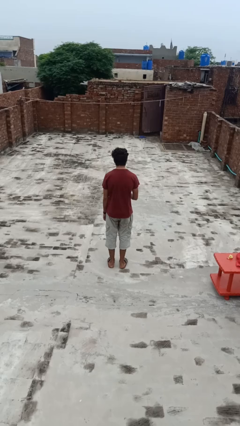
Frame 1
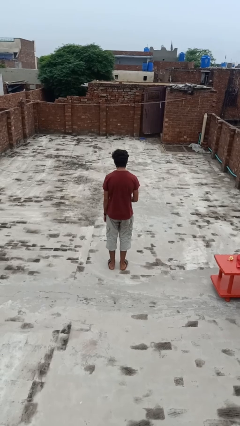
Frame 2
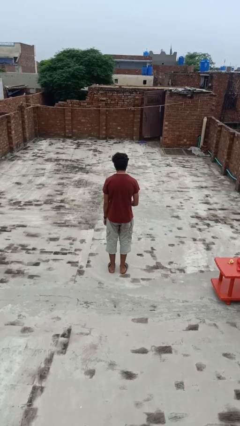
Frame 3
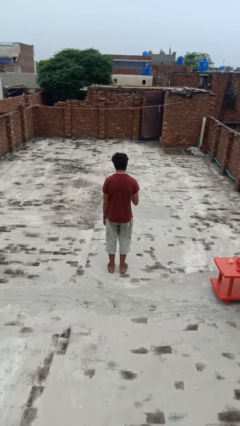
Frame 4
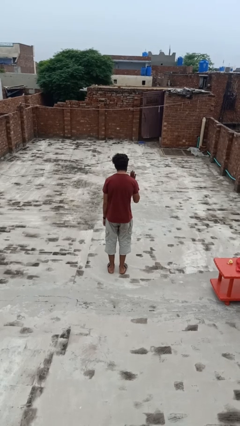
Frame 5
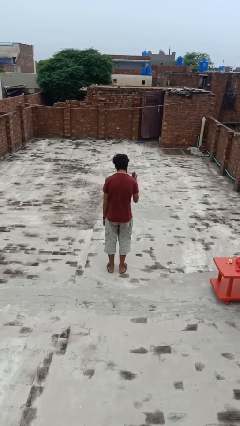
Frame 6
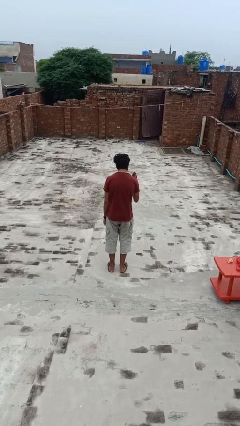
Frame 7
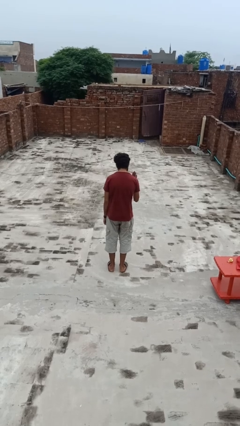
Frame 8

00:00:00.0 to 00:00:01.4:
person gestures stop

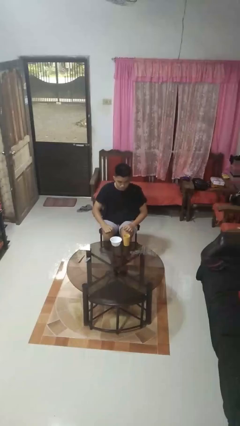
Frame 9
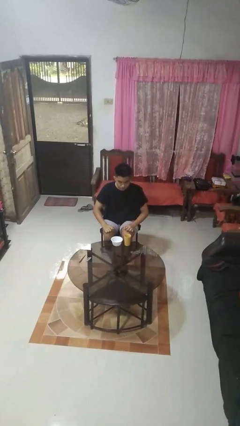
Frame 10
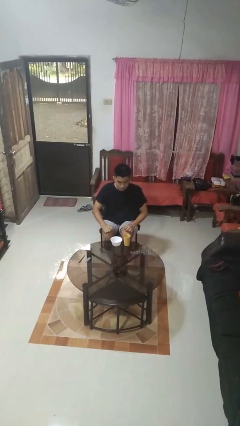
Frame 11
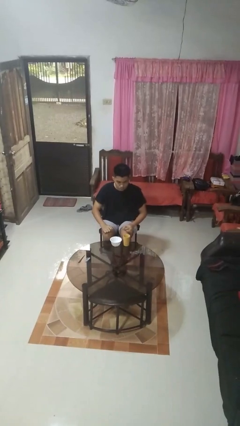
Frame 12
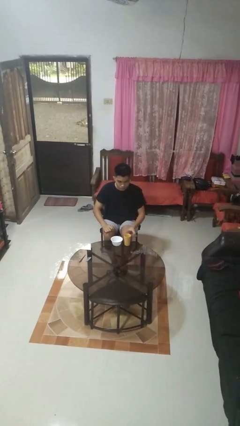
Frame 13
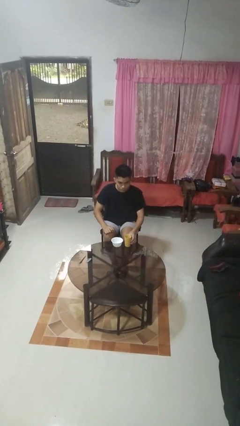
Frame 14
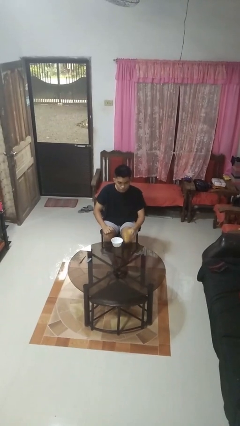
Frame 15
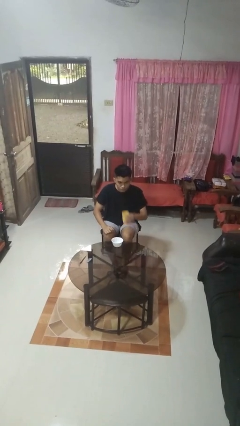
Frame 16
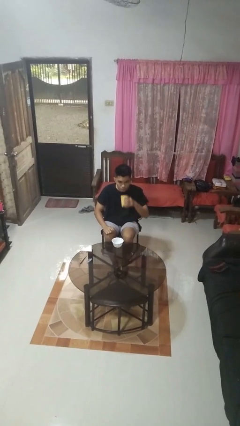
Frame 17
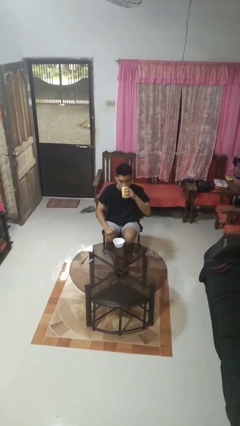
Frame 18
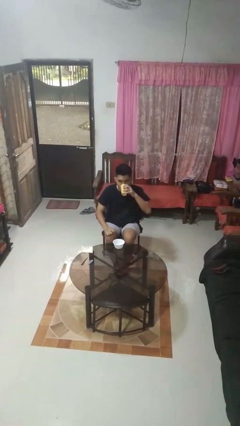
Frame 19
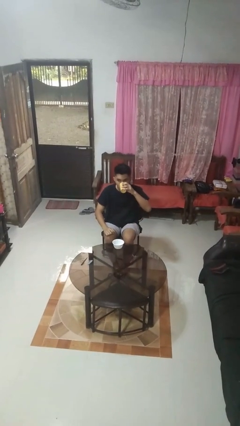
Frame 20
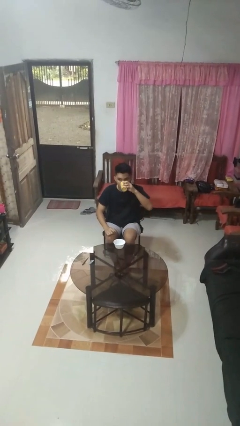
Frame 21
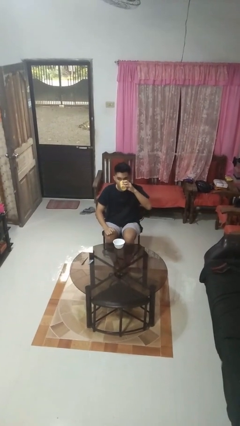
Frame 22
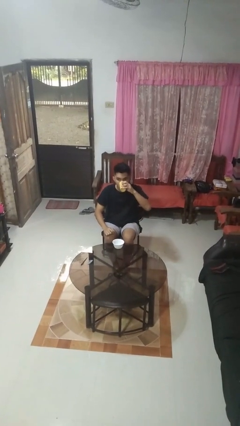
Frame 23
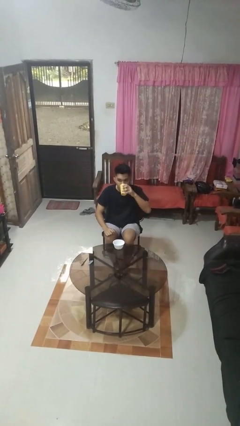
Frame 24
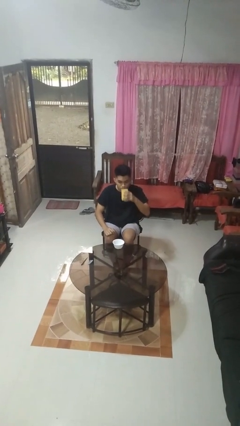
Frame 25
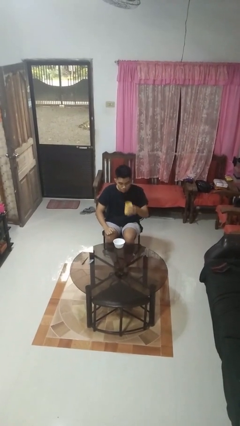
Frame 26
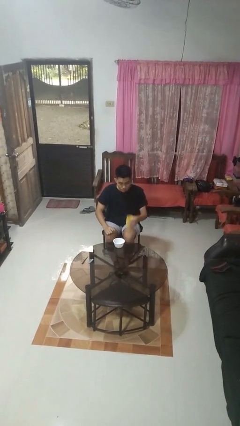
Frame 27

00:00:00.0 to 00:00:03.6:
person drinks from cup

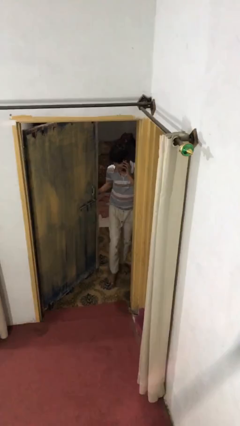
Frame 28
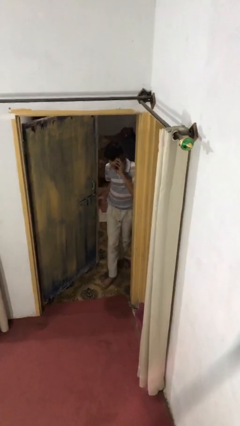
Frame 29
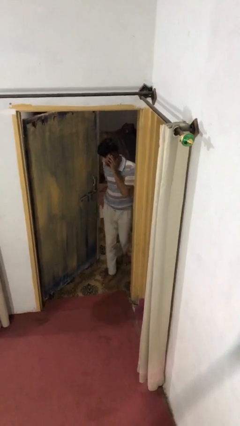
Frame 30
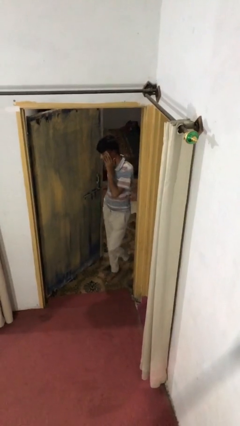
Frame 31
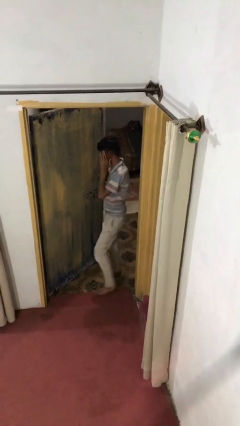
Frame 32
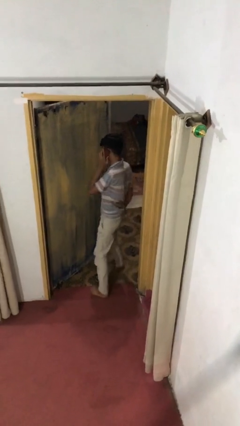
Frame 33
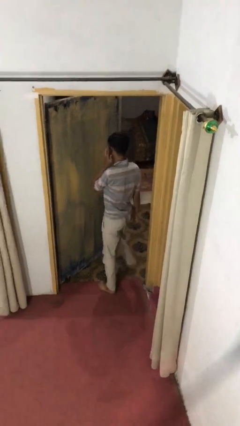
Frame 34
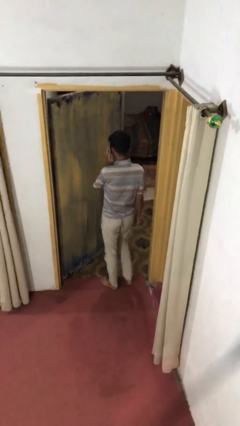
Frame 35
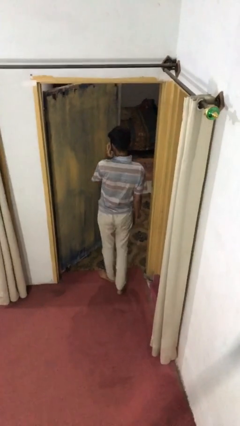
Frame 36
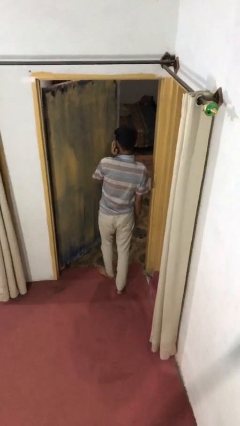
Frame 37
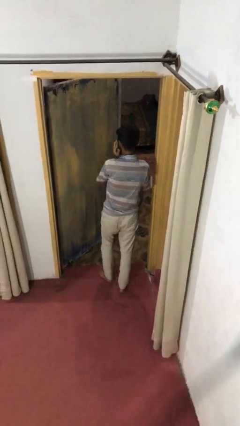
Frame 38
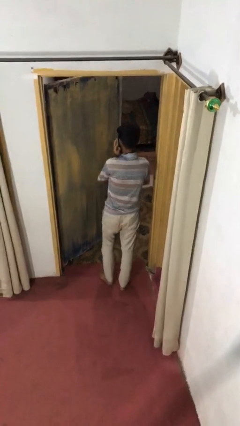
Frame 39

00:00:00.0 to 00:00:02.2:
person enters scene through structure

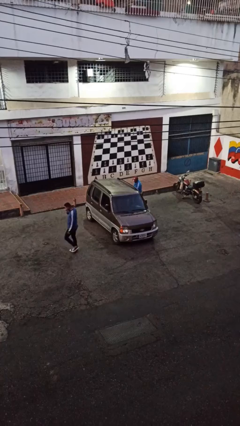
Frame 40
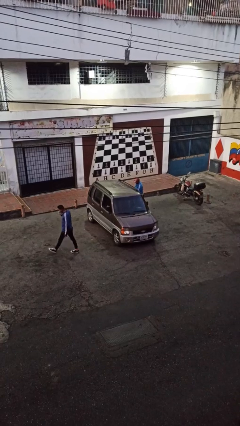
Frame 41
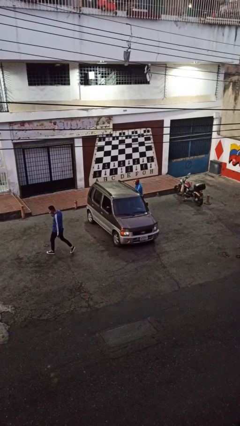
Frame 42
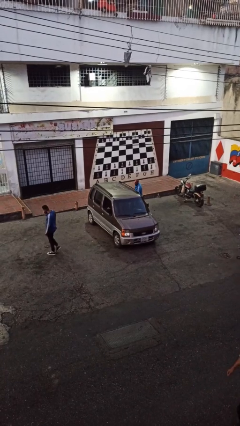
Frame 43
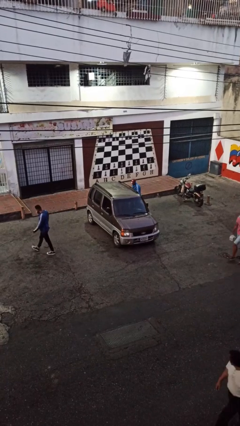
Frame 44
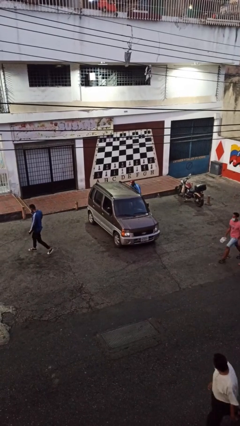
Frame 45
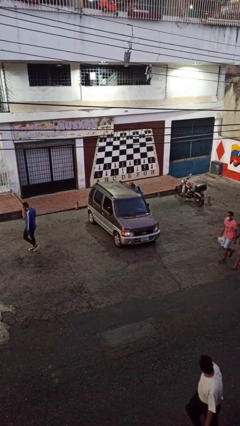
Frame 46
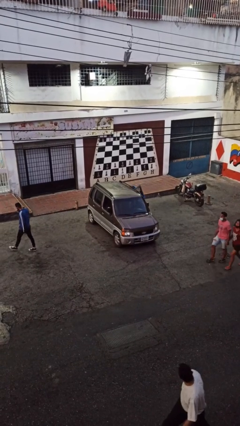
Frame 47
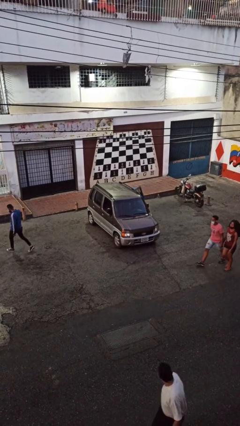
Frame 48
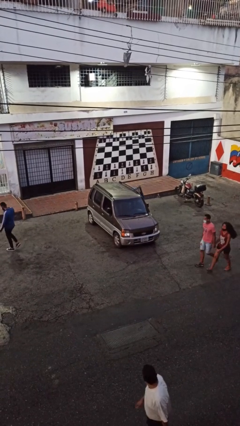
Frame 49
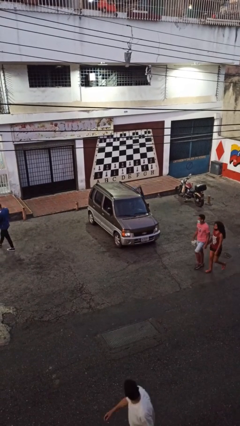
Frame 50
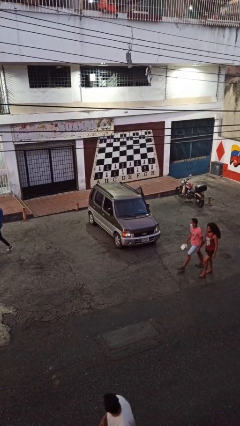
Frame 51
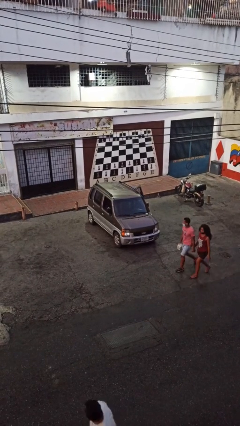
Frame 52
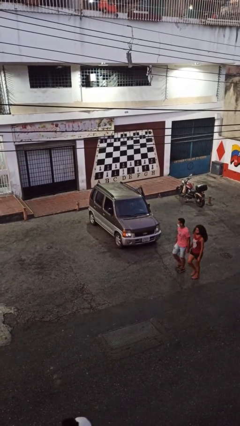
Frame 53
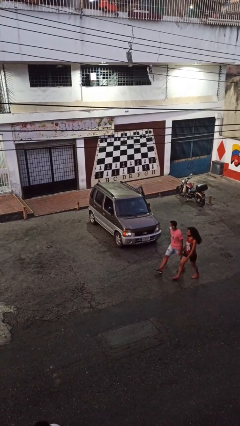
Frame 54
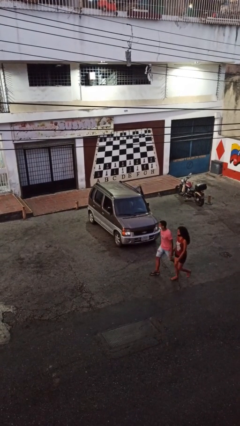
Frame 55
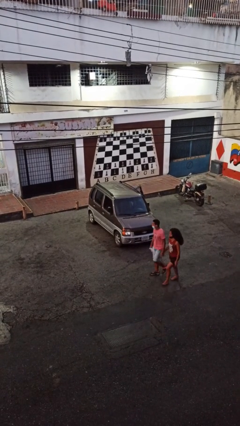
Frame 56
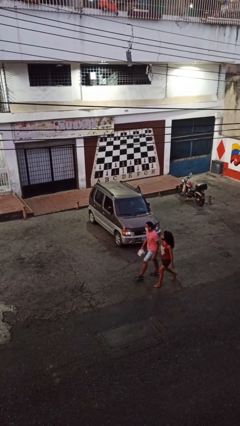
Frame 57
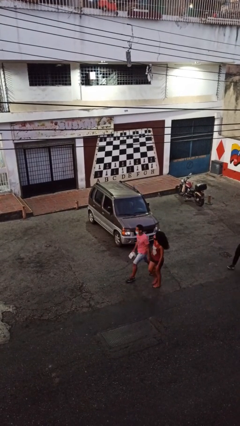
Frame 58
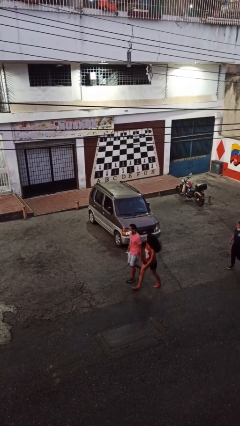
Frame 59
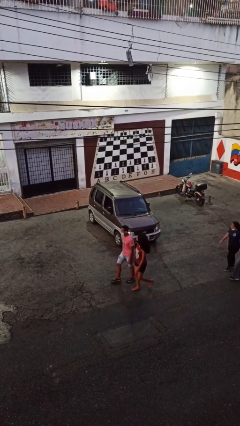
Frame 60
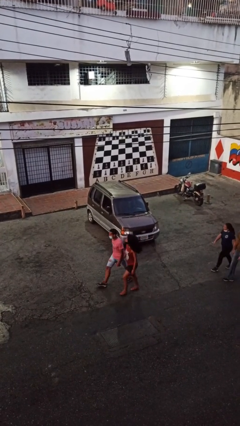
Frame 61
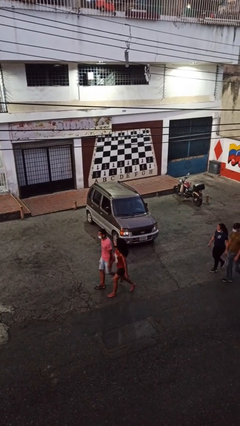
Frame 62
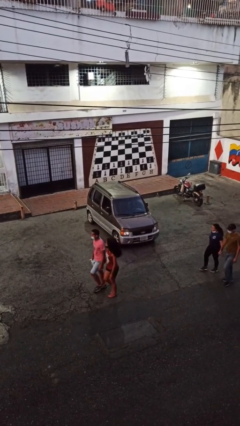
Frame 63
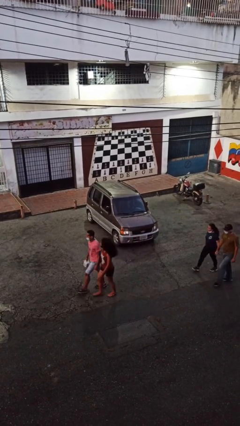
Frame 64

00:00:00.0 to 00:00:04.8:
car picks up person

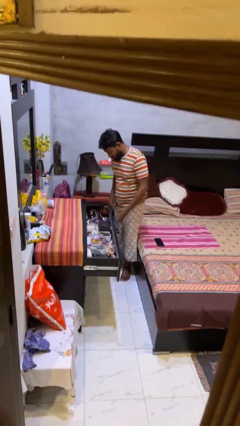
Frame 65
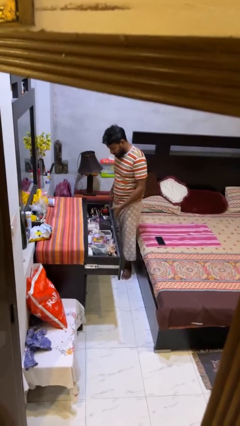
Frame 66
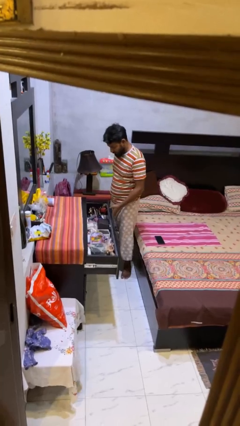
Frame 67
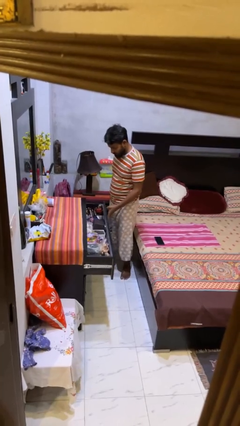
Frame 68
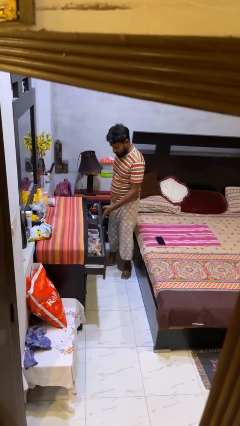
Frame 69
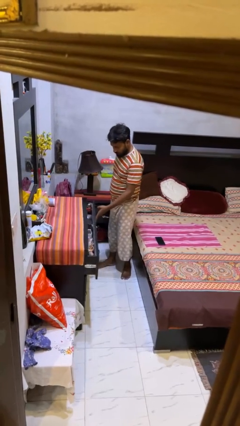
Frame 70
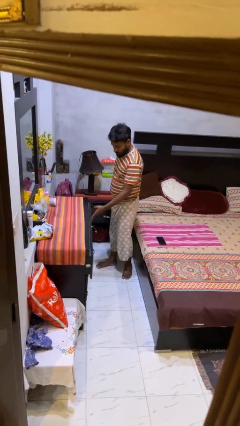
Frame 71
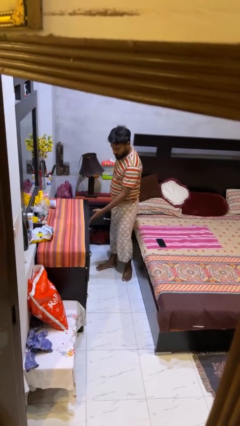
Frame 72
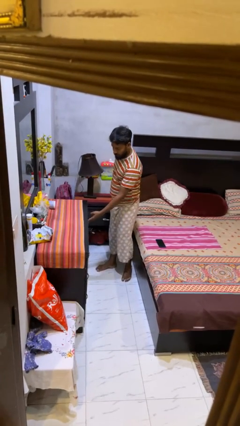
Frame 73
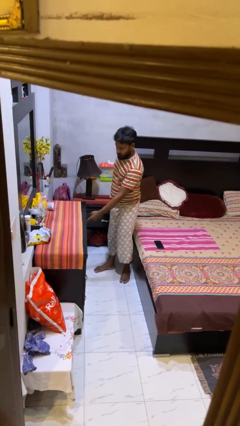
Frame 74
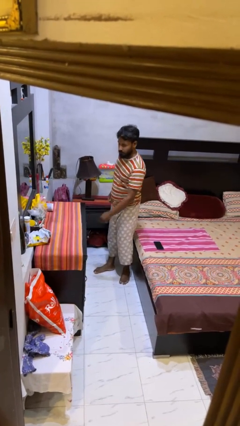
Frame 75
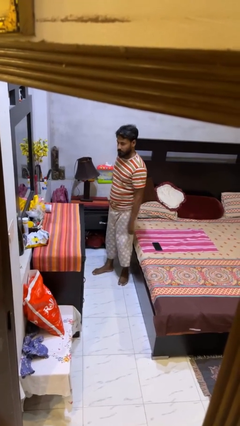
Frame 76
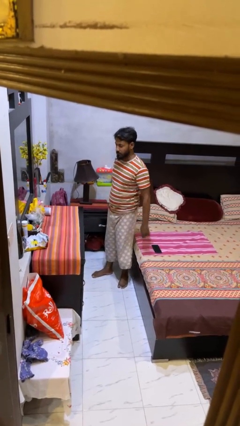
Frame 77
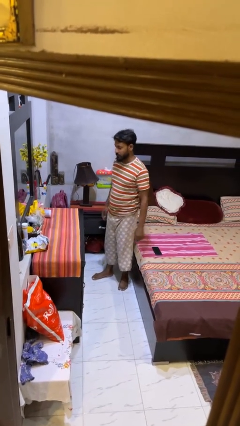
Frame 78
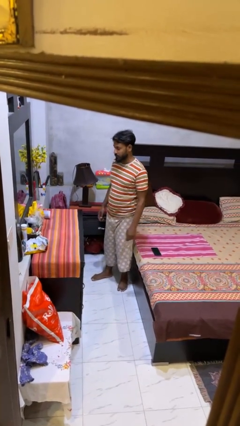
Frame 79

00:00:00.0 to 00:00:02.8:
person closes dresser drawer

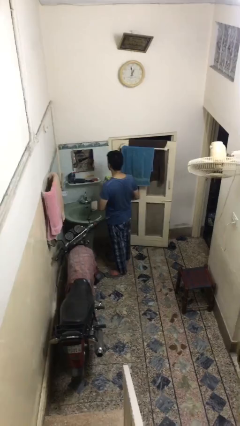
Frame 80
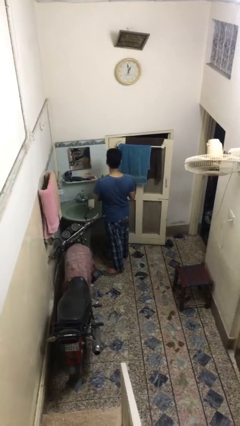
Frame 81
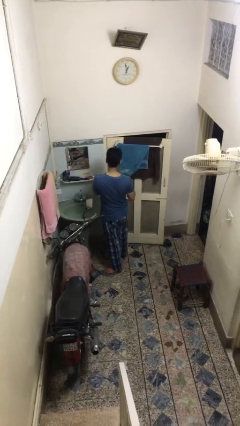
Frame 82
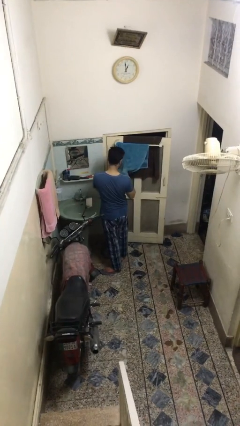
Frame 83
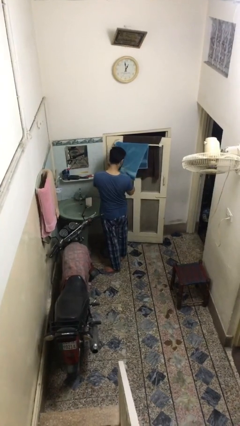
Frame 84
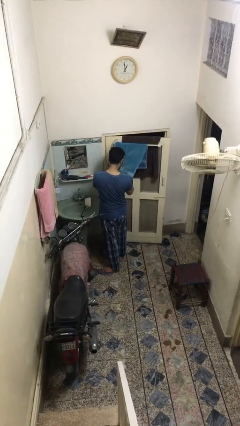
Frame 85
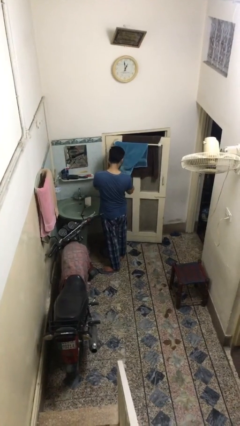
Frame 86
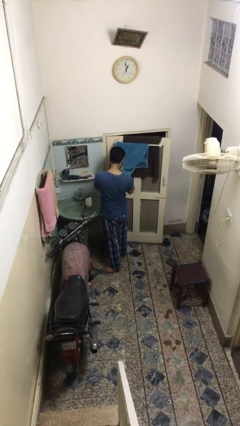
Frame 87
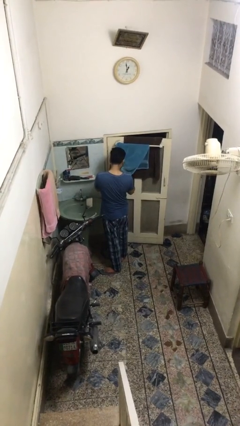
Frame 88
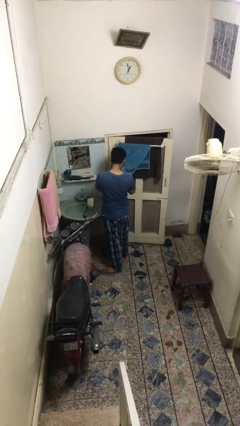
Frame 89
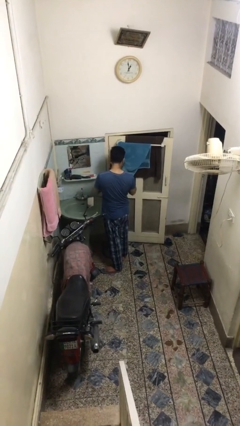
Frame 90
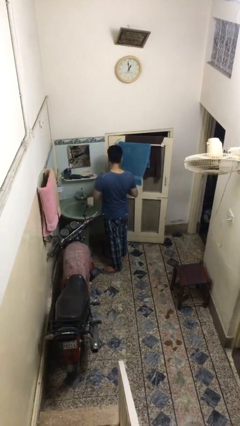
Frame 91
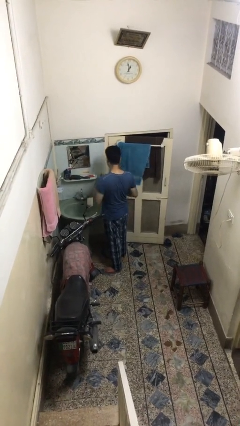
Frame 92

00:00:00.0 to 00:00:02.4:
person dries face with towel
